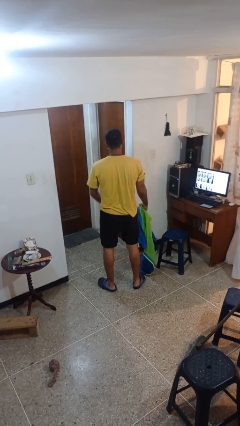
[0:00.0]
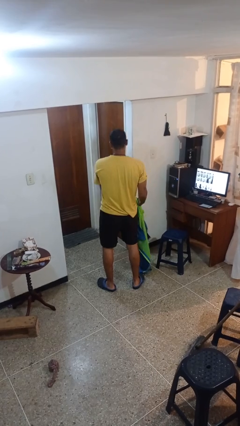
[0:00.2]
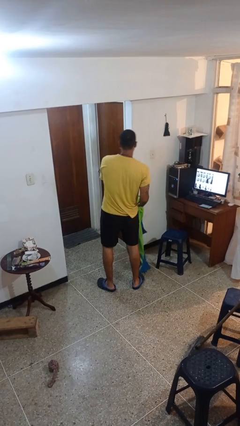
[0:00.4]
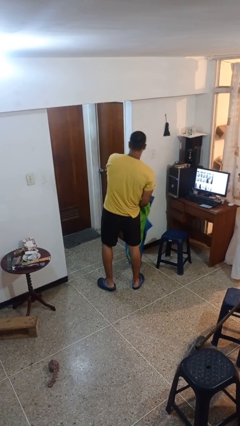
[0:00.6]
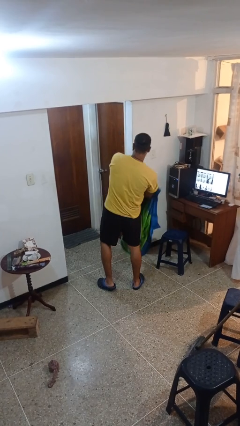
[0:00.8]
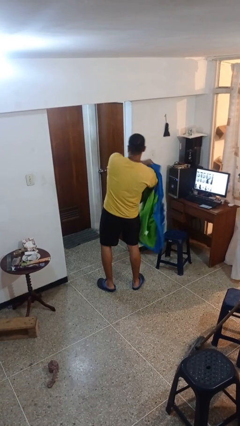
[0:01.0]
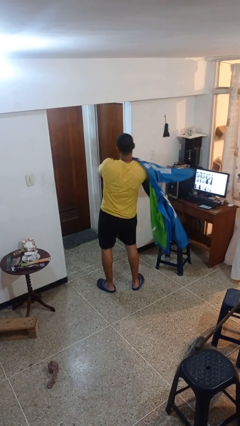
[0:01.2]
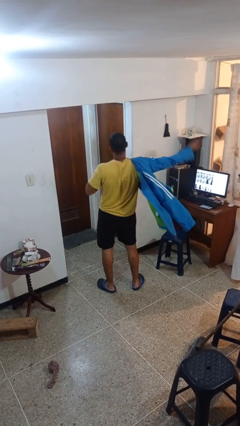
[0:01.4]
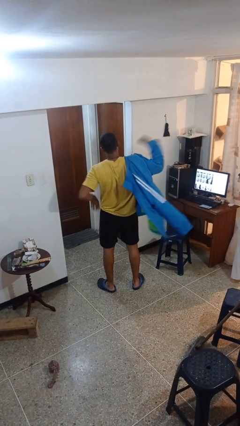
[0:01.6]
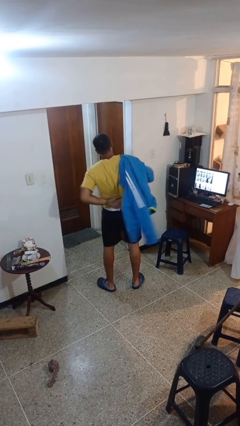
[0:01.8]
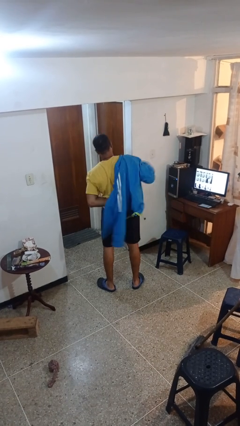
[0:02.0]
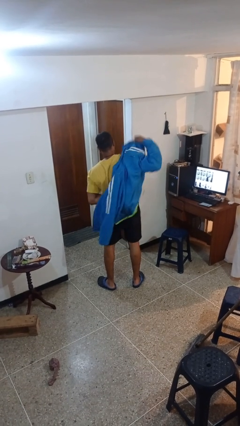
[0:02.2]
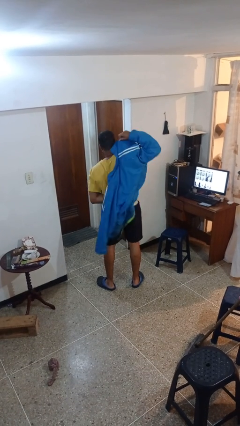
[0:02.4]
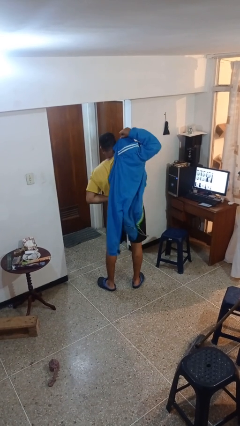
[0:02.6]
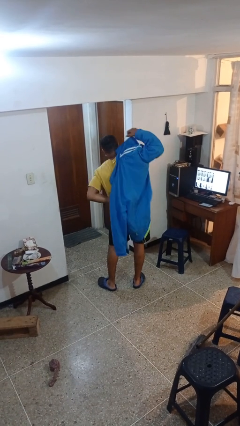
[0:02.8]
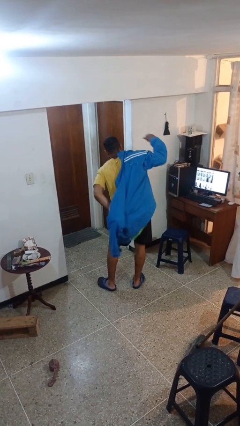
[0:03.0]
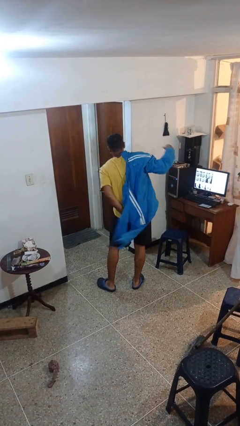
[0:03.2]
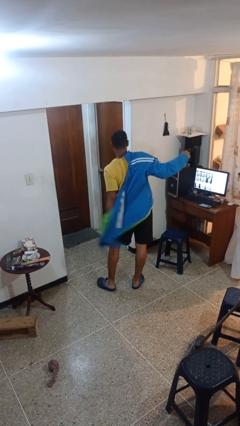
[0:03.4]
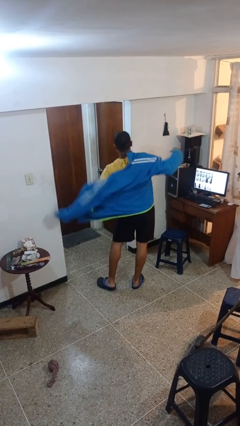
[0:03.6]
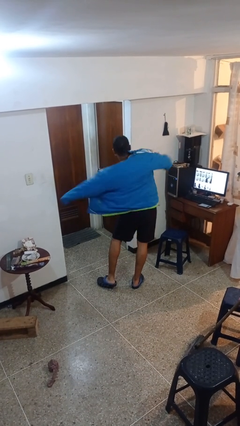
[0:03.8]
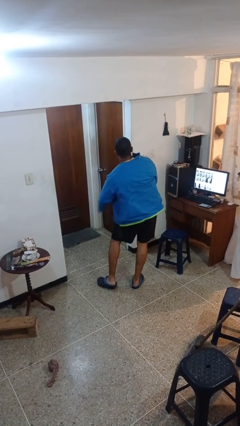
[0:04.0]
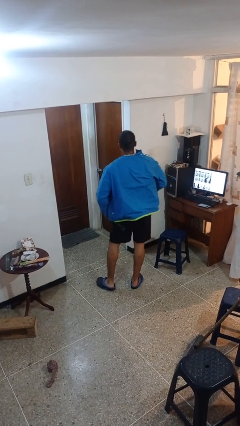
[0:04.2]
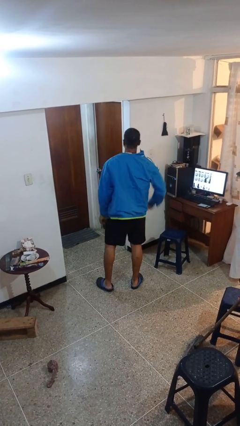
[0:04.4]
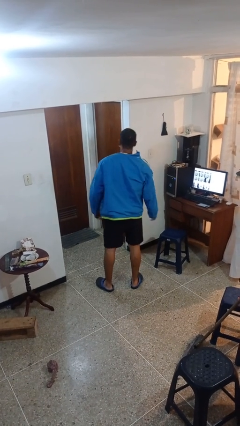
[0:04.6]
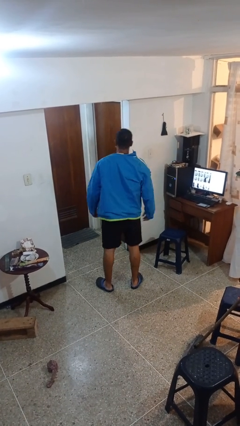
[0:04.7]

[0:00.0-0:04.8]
person puts on jacket

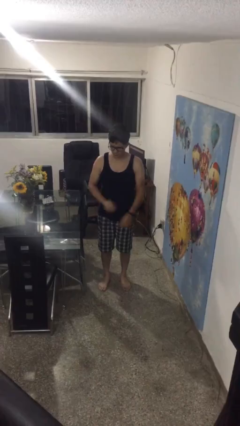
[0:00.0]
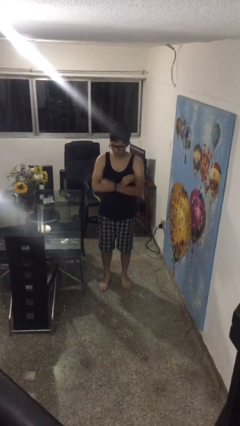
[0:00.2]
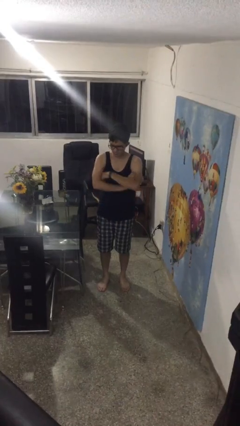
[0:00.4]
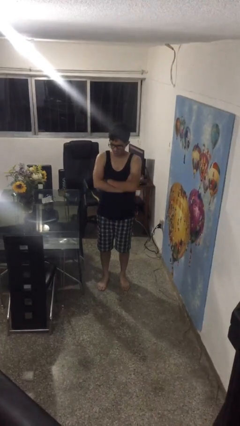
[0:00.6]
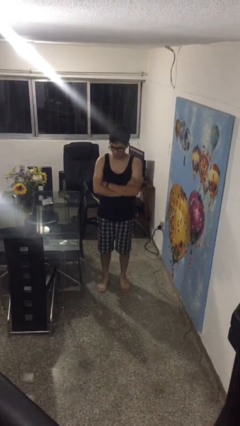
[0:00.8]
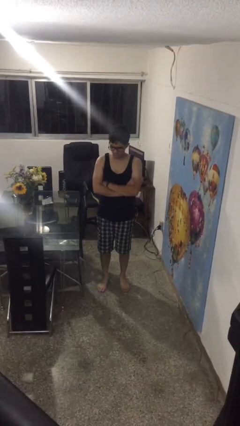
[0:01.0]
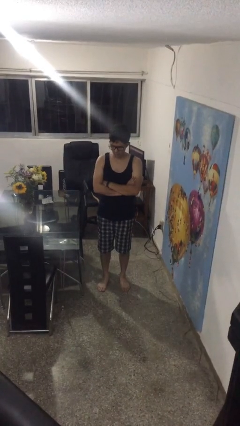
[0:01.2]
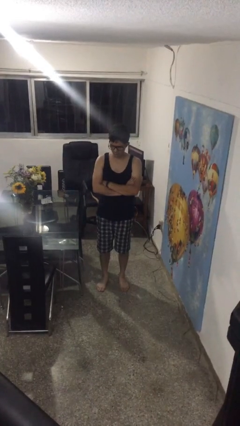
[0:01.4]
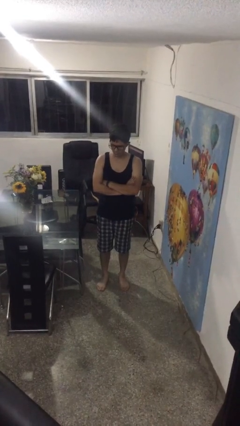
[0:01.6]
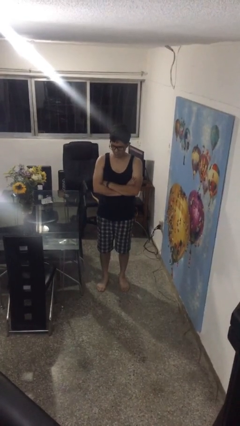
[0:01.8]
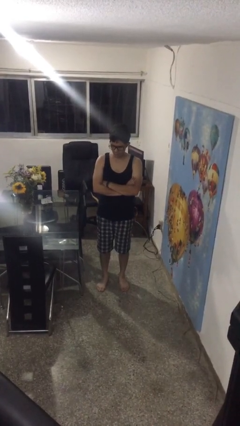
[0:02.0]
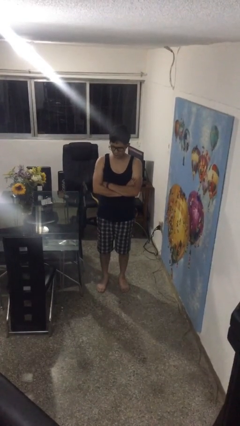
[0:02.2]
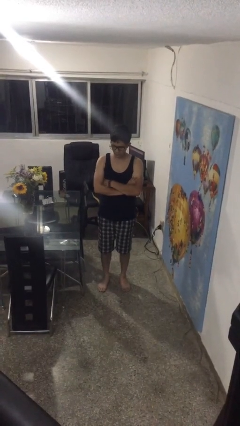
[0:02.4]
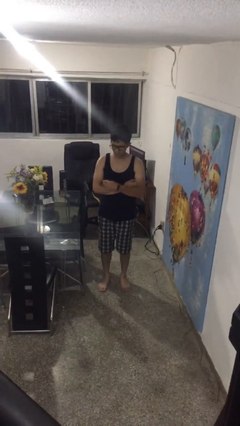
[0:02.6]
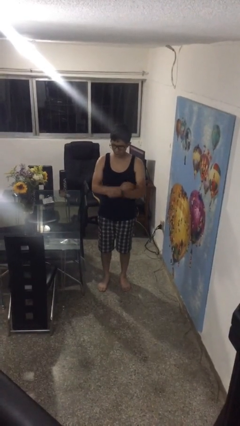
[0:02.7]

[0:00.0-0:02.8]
person crosses arms

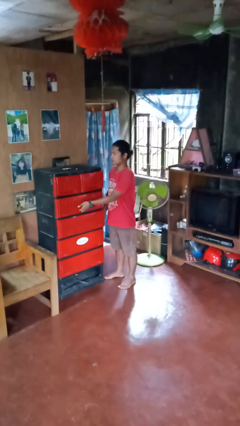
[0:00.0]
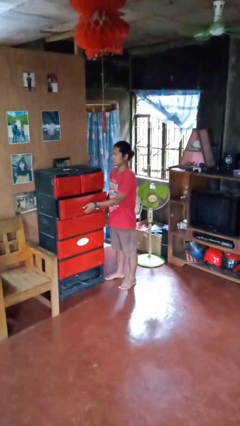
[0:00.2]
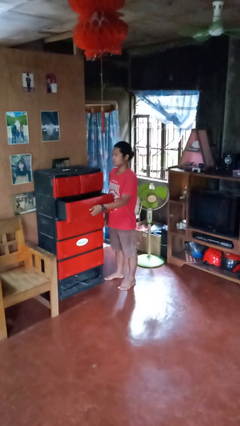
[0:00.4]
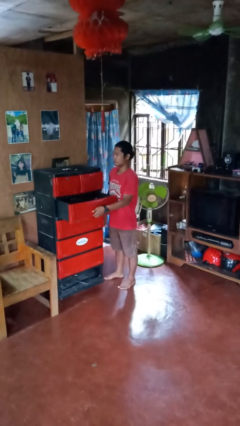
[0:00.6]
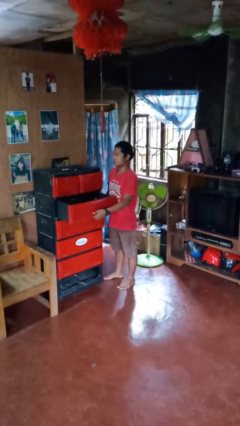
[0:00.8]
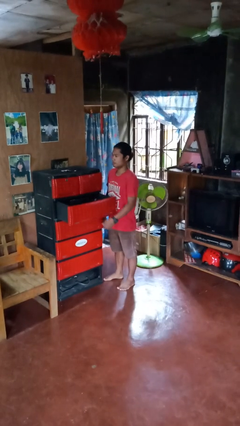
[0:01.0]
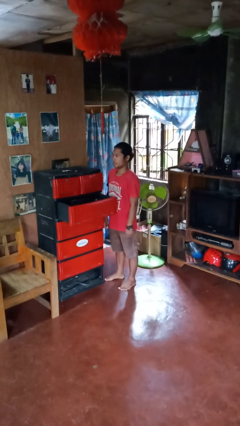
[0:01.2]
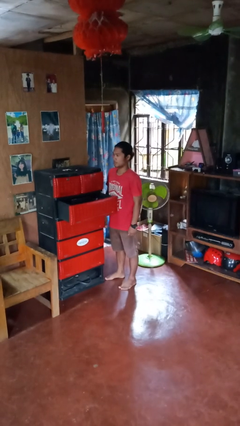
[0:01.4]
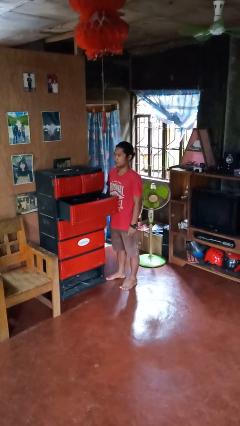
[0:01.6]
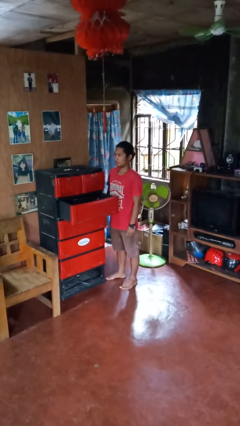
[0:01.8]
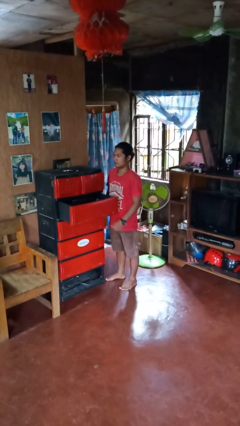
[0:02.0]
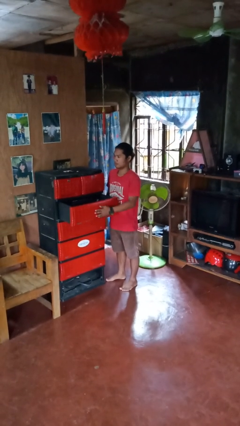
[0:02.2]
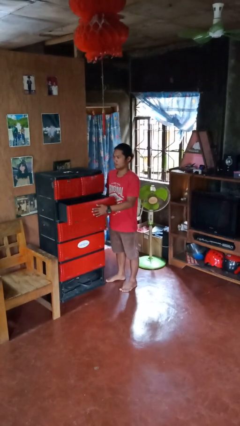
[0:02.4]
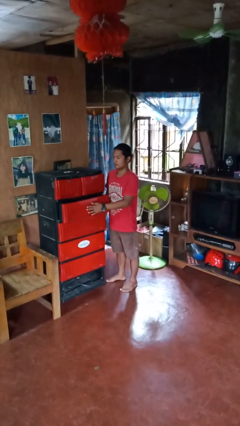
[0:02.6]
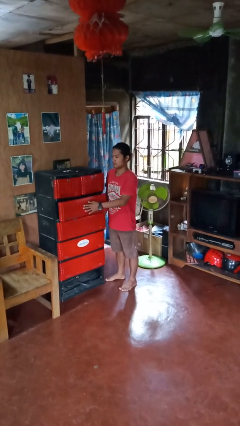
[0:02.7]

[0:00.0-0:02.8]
person opens dresser drawer

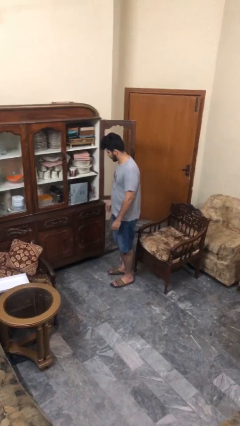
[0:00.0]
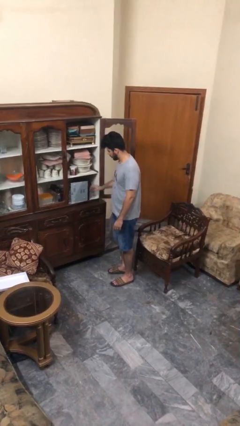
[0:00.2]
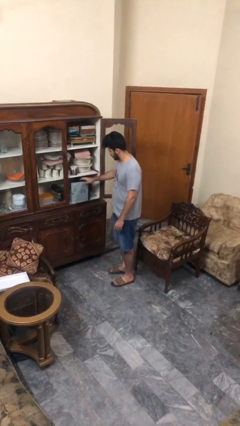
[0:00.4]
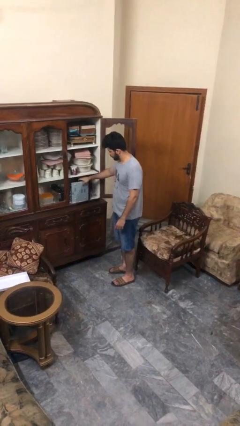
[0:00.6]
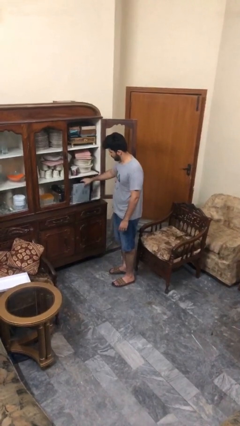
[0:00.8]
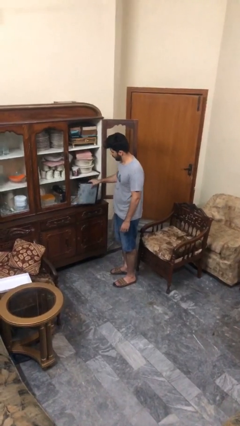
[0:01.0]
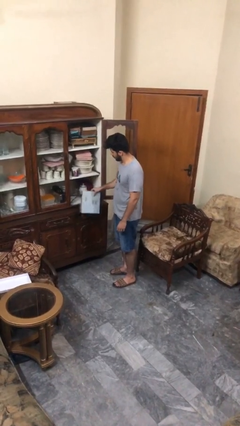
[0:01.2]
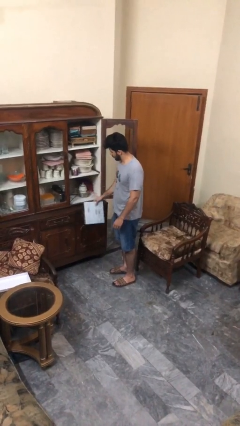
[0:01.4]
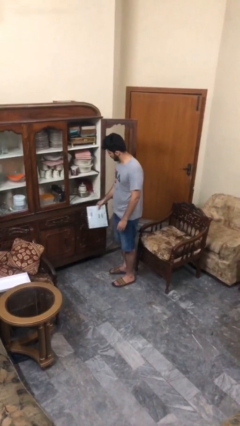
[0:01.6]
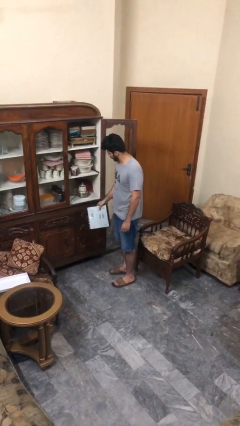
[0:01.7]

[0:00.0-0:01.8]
person picks up object from cabinet

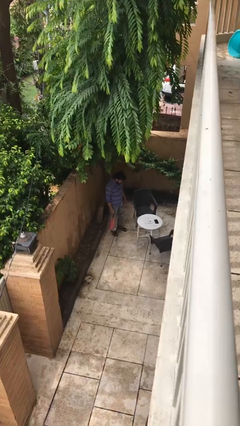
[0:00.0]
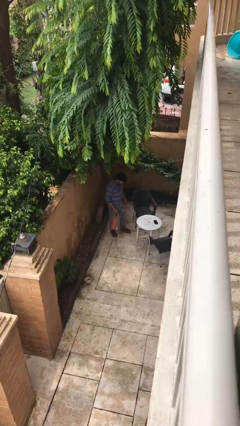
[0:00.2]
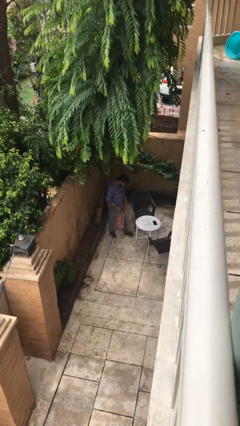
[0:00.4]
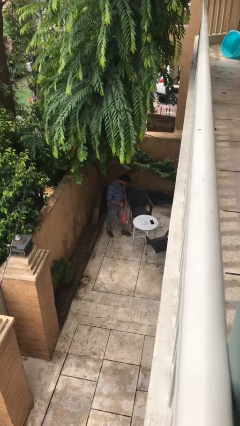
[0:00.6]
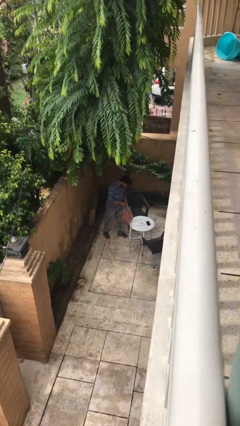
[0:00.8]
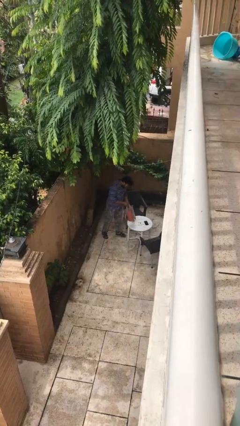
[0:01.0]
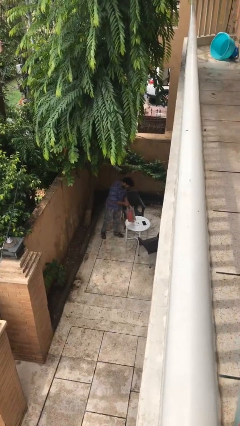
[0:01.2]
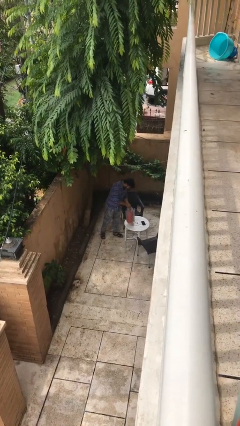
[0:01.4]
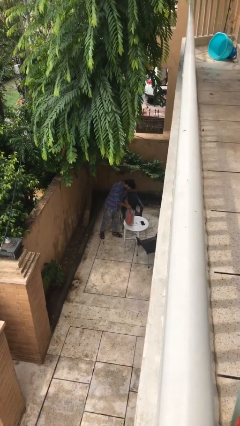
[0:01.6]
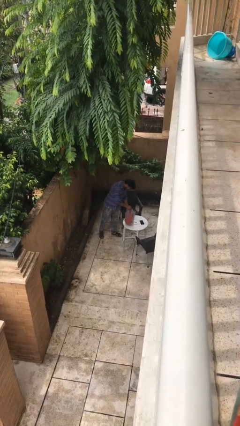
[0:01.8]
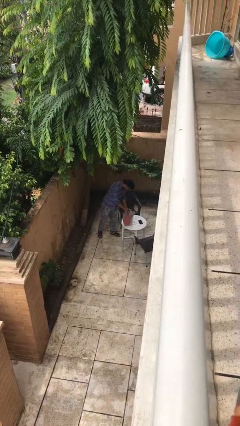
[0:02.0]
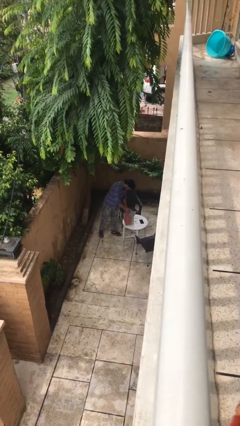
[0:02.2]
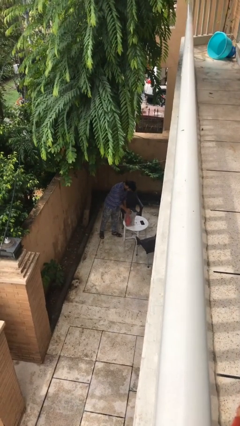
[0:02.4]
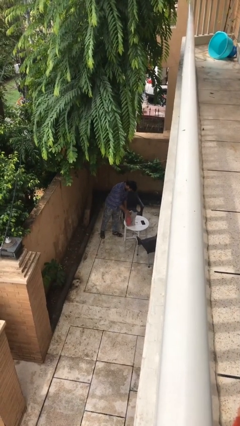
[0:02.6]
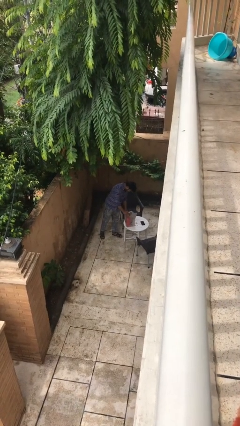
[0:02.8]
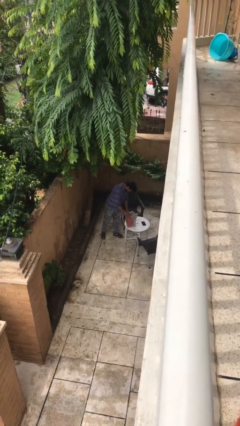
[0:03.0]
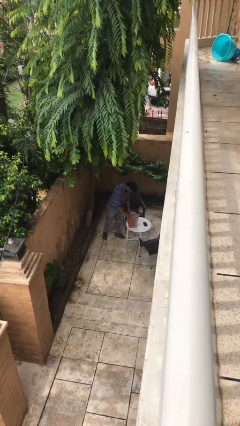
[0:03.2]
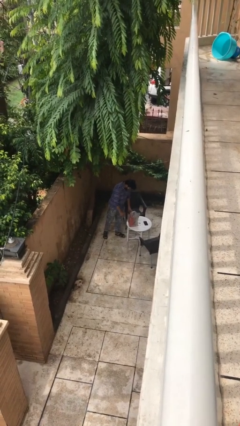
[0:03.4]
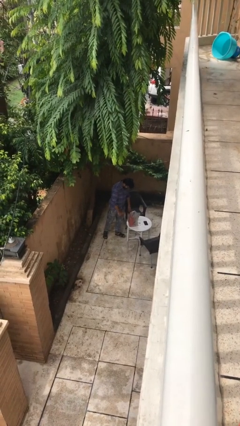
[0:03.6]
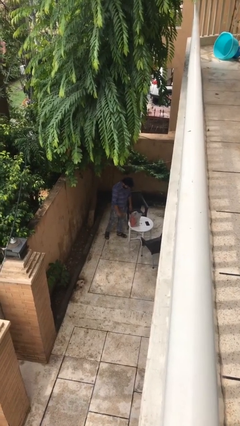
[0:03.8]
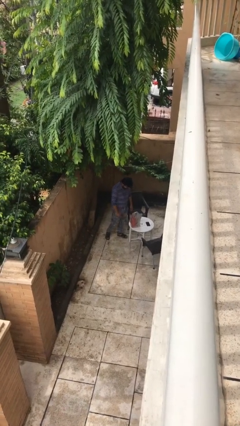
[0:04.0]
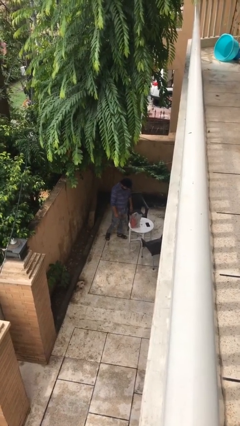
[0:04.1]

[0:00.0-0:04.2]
person puts down object on table

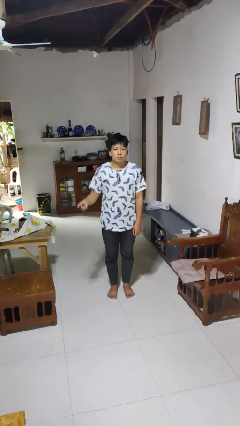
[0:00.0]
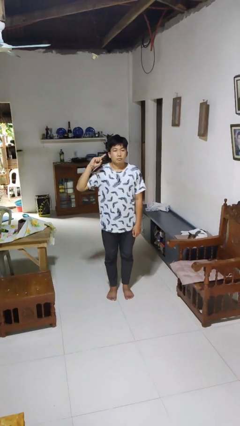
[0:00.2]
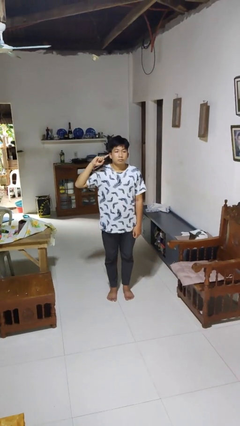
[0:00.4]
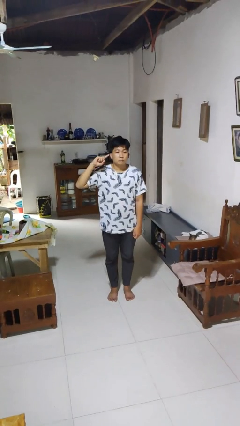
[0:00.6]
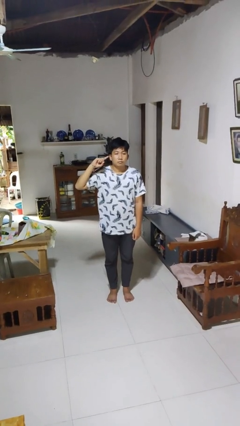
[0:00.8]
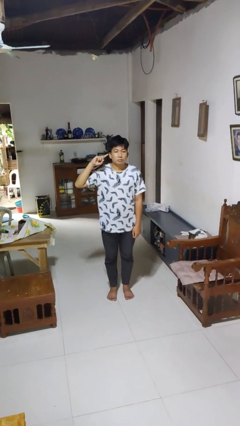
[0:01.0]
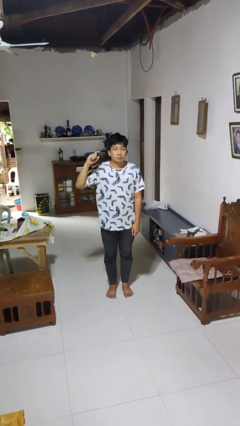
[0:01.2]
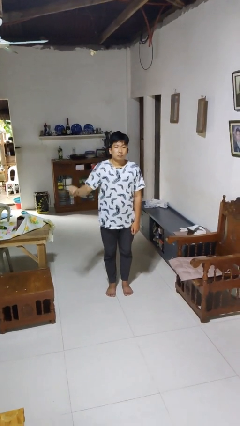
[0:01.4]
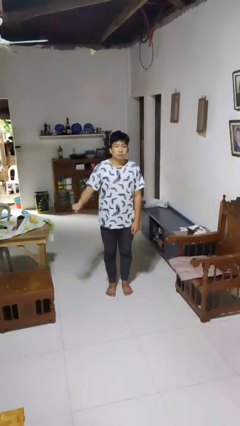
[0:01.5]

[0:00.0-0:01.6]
person gestures listen closely
